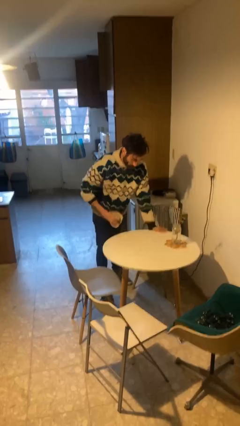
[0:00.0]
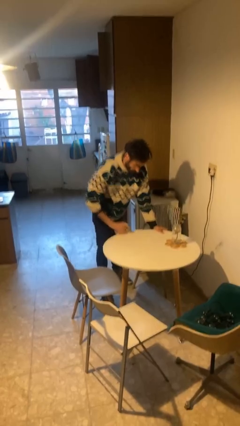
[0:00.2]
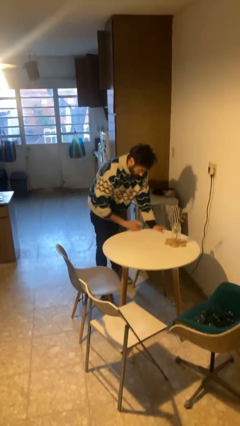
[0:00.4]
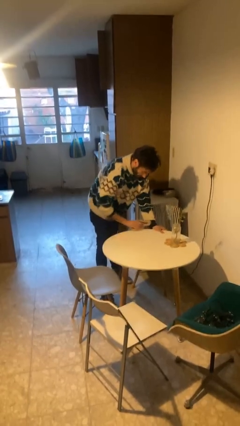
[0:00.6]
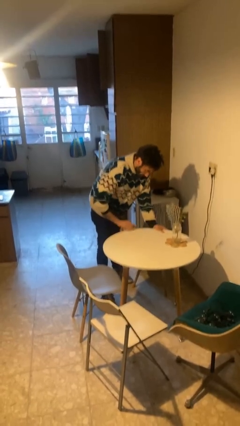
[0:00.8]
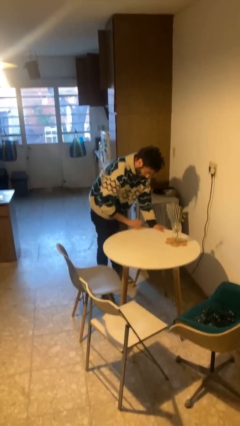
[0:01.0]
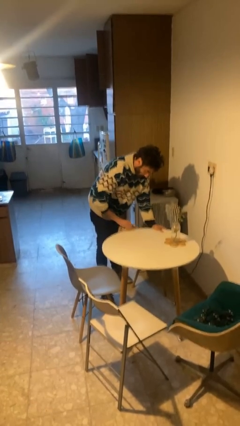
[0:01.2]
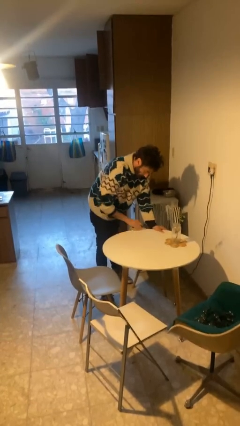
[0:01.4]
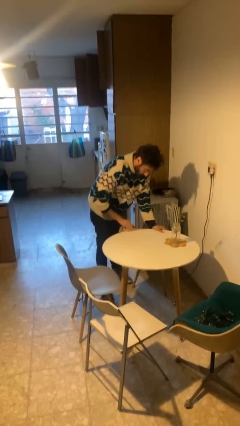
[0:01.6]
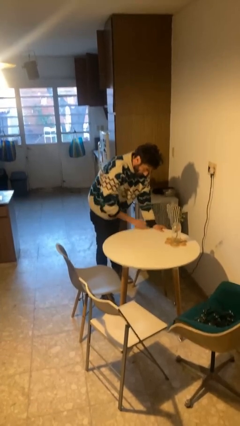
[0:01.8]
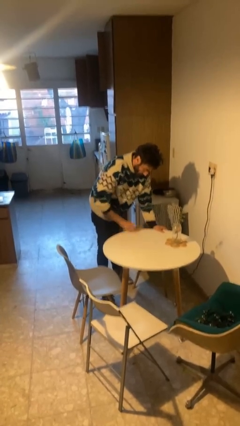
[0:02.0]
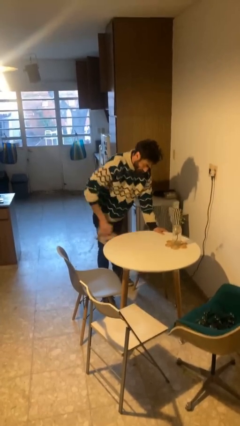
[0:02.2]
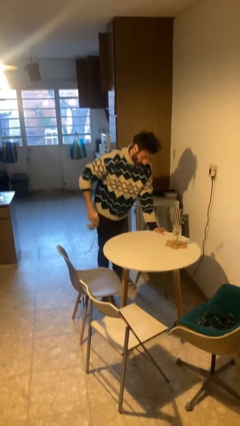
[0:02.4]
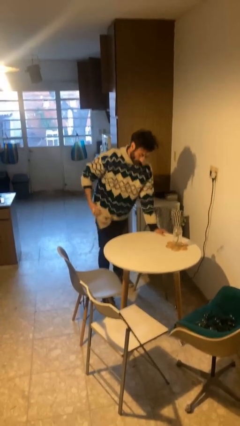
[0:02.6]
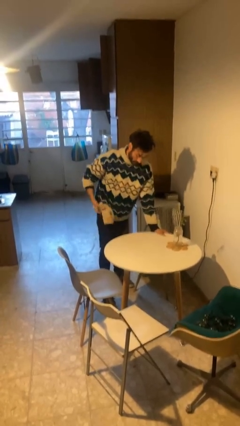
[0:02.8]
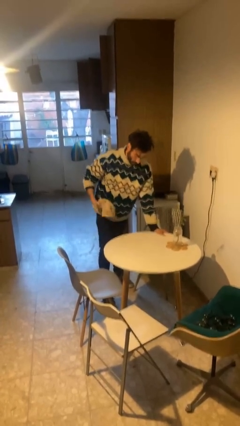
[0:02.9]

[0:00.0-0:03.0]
person cleans table with rag

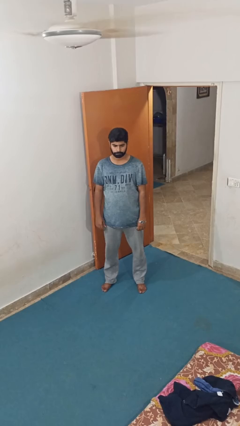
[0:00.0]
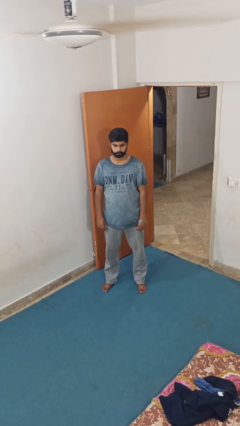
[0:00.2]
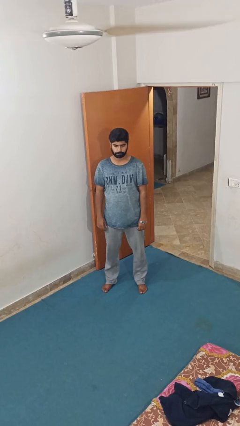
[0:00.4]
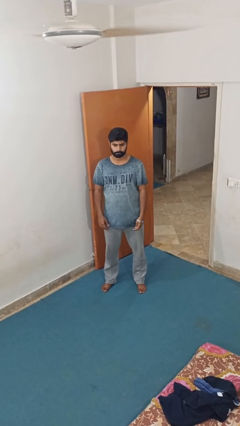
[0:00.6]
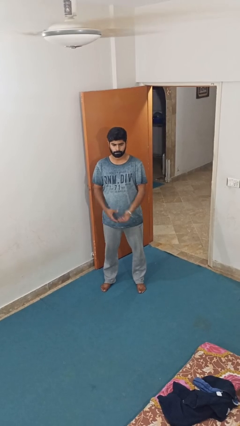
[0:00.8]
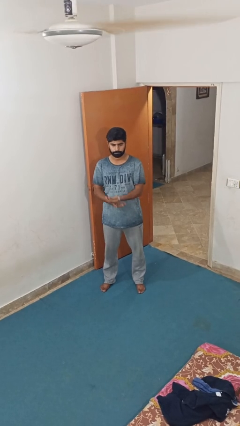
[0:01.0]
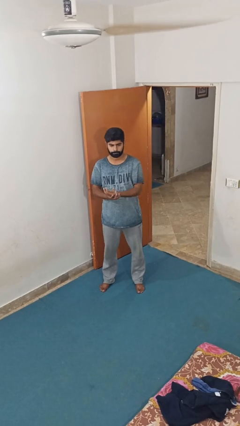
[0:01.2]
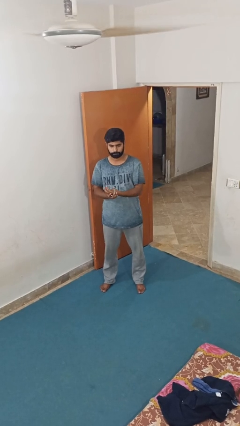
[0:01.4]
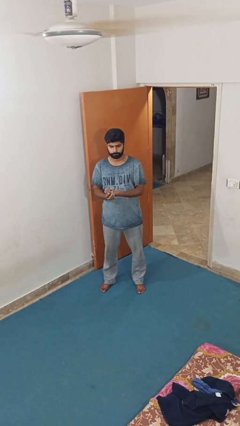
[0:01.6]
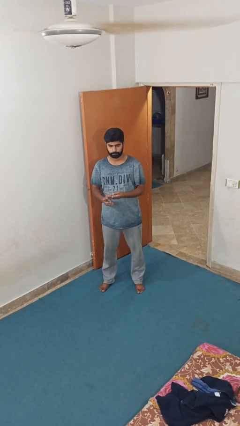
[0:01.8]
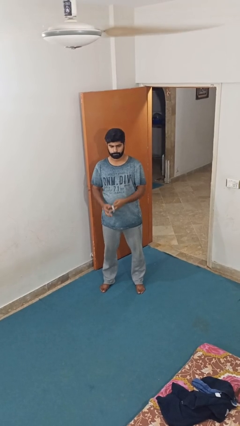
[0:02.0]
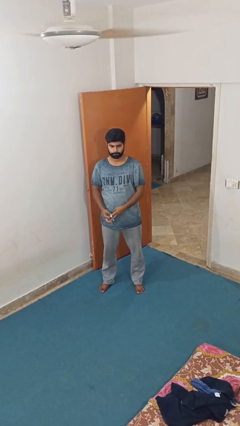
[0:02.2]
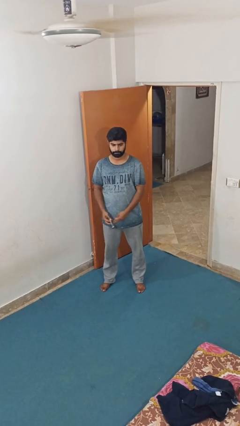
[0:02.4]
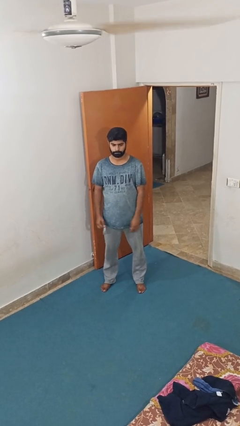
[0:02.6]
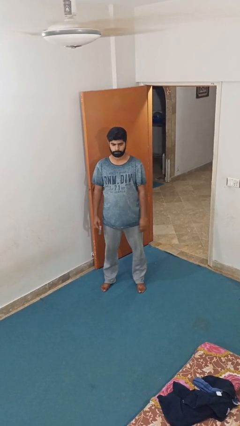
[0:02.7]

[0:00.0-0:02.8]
person takes off wristwatch

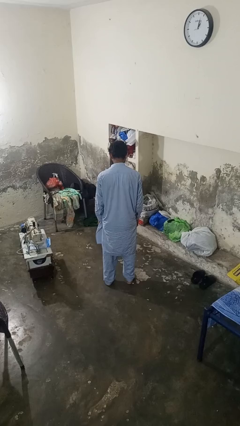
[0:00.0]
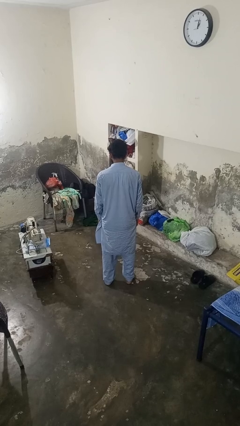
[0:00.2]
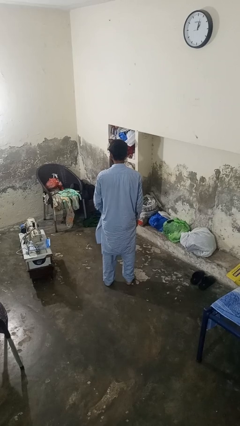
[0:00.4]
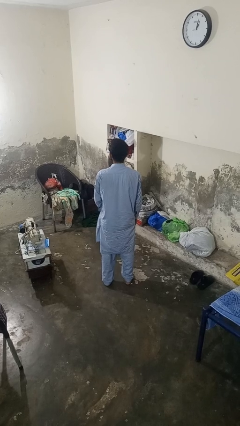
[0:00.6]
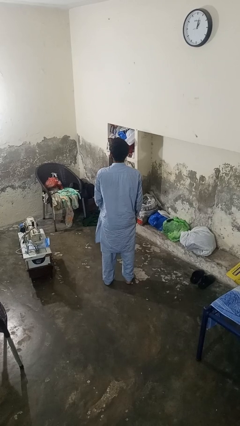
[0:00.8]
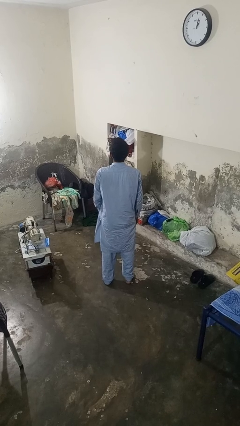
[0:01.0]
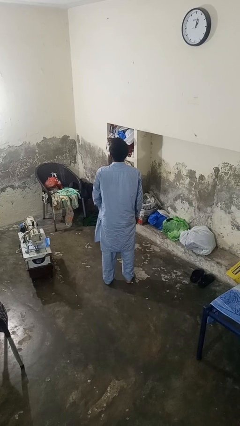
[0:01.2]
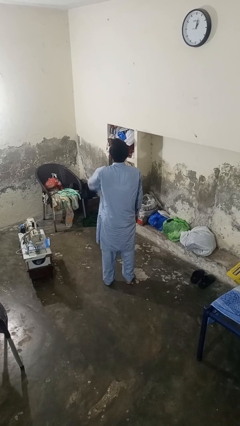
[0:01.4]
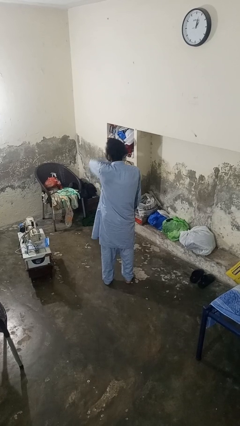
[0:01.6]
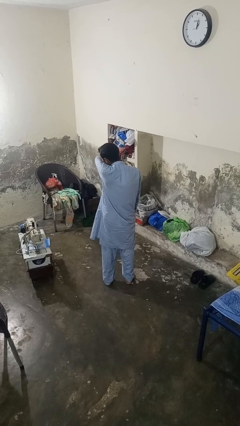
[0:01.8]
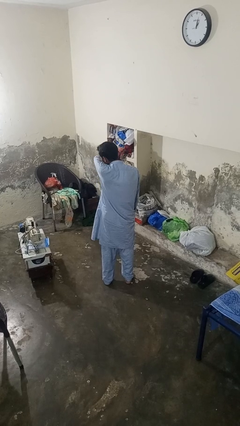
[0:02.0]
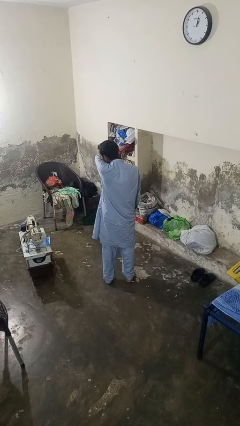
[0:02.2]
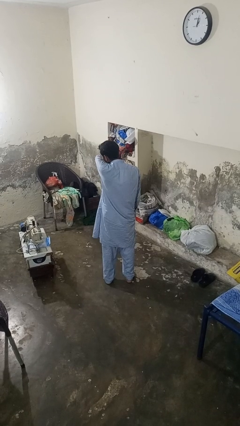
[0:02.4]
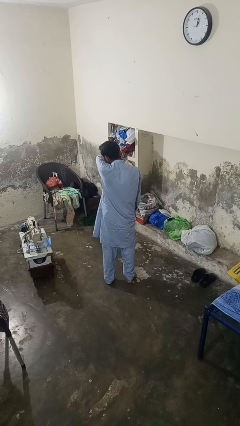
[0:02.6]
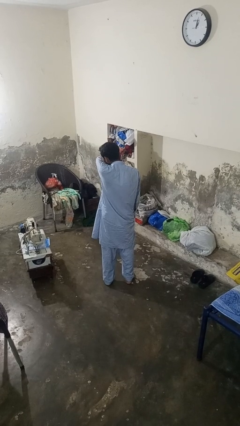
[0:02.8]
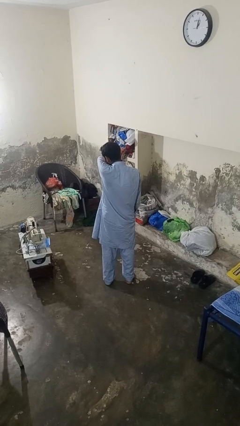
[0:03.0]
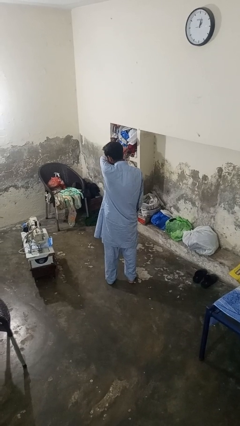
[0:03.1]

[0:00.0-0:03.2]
person sneezes into arm

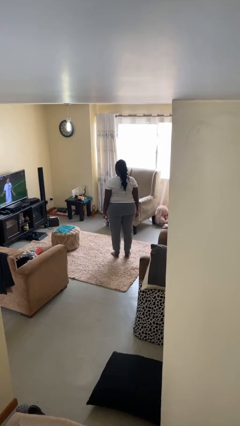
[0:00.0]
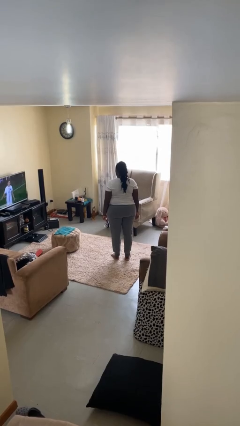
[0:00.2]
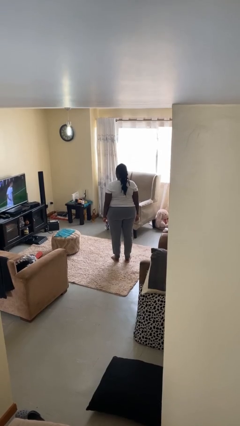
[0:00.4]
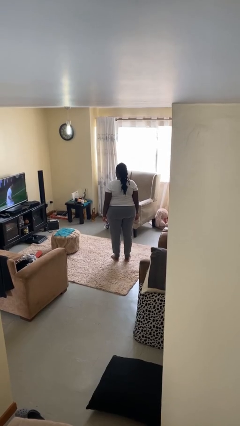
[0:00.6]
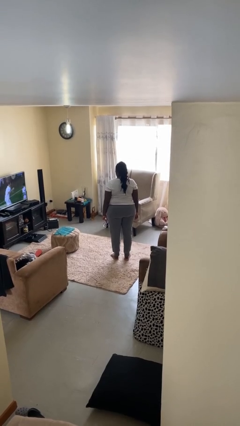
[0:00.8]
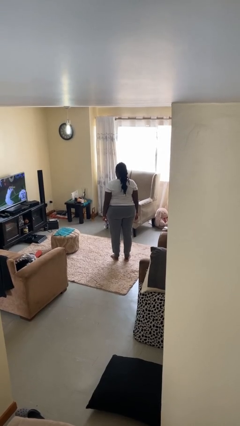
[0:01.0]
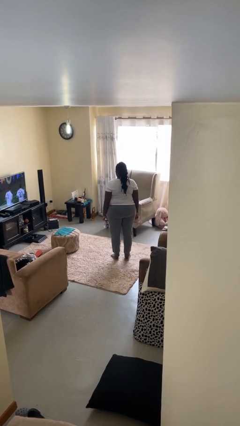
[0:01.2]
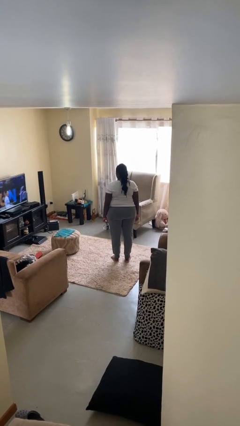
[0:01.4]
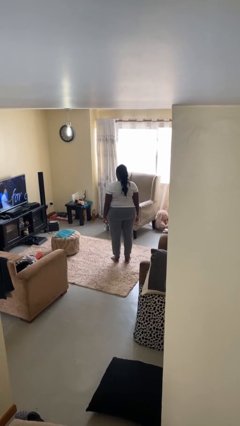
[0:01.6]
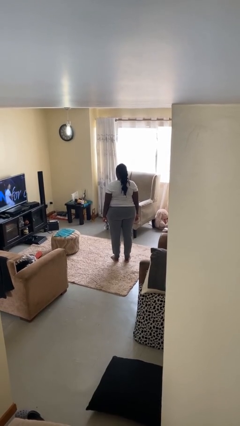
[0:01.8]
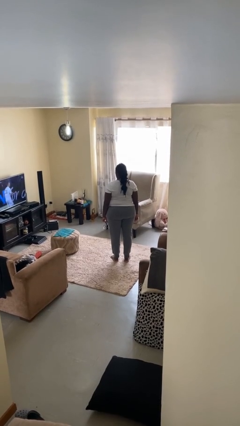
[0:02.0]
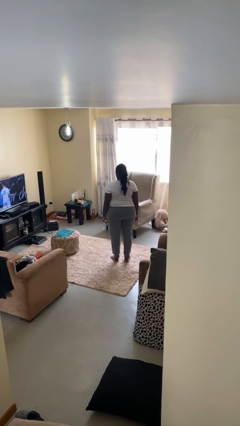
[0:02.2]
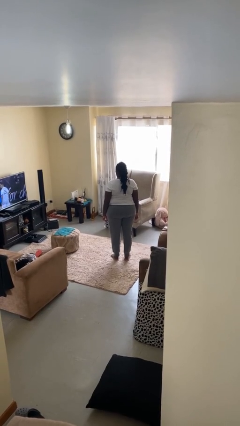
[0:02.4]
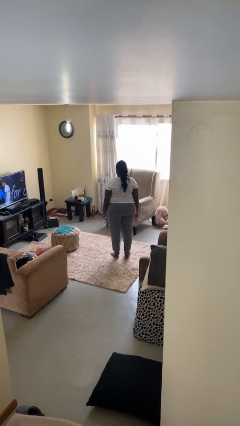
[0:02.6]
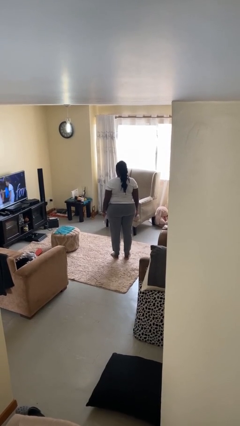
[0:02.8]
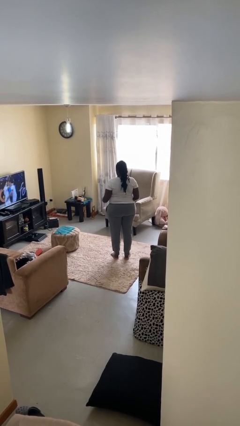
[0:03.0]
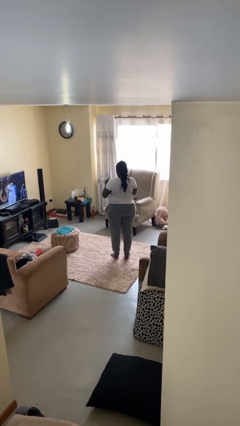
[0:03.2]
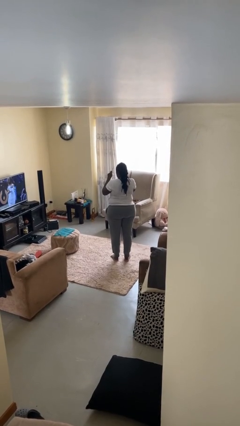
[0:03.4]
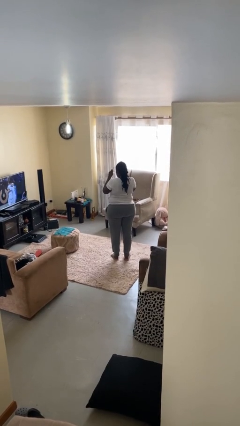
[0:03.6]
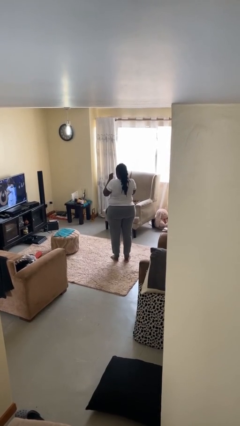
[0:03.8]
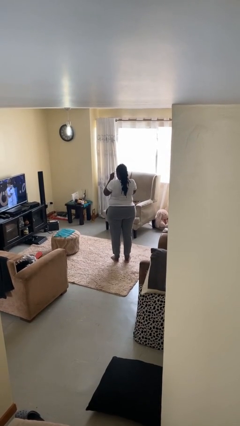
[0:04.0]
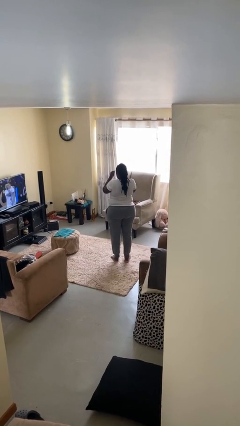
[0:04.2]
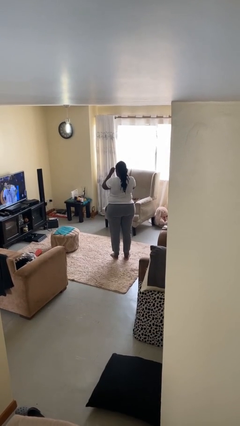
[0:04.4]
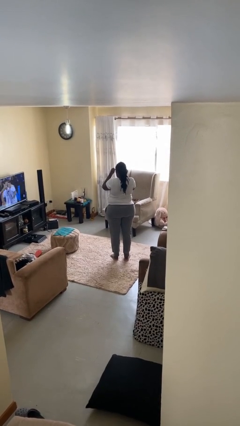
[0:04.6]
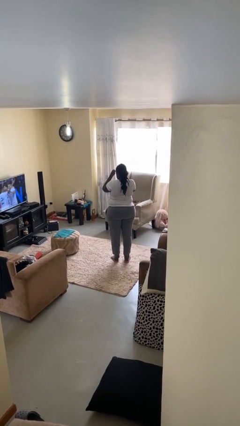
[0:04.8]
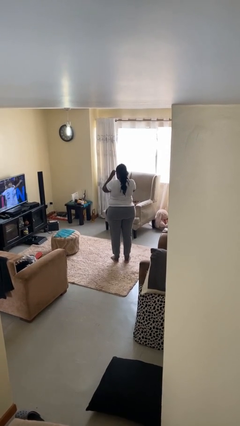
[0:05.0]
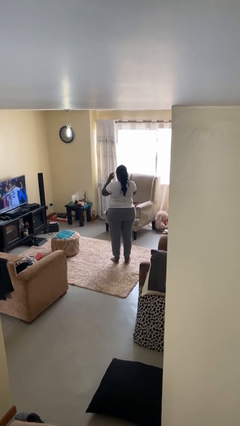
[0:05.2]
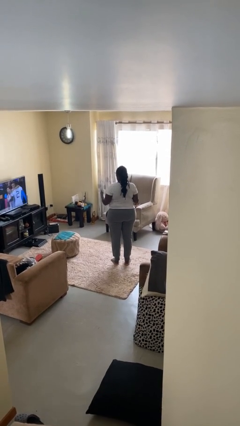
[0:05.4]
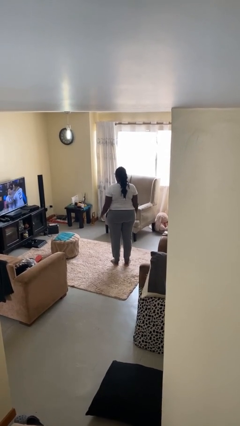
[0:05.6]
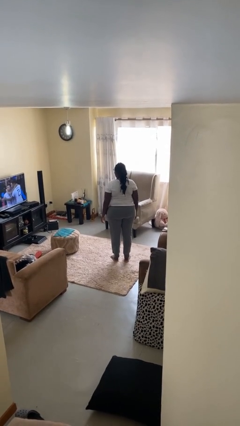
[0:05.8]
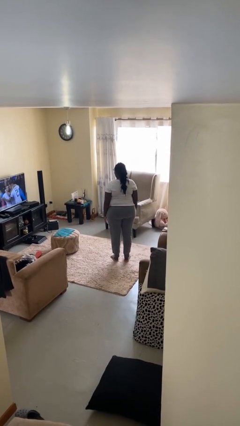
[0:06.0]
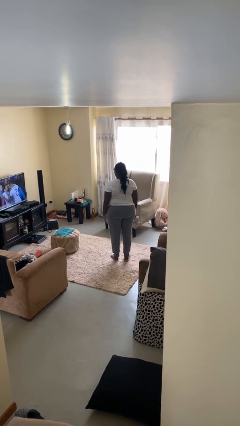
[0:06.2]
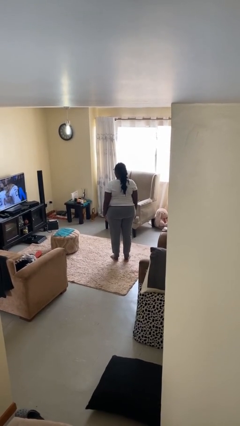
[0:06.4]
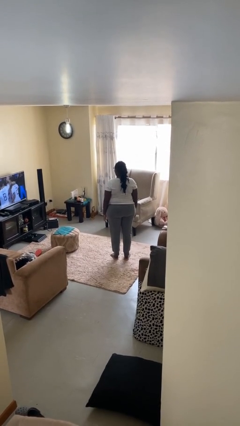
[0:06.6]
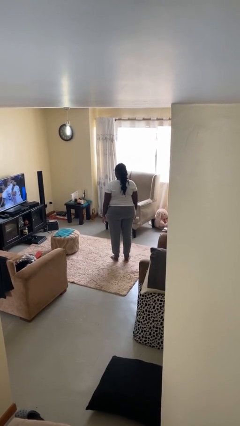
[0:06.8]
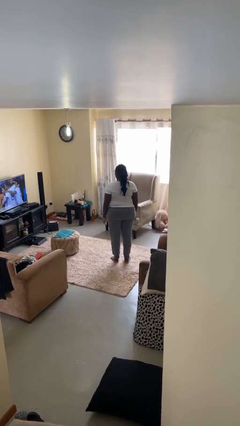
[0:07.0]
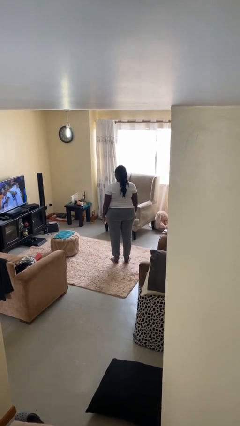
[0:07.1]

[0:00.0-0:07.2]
person puts on glasses

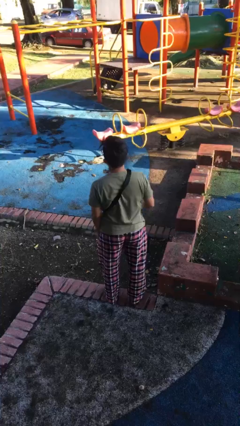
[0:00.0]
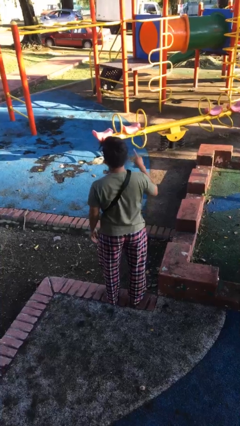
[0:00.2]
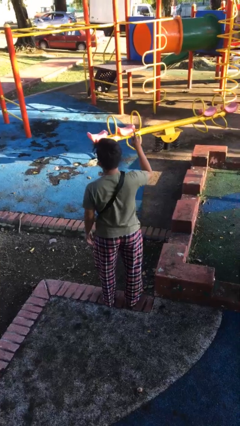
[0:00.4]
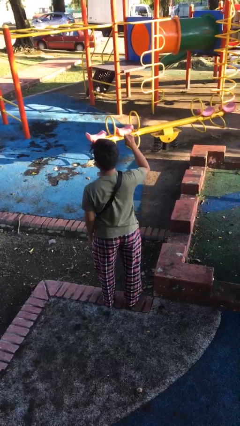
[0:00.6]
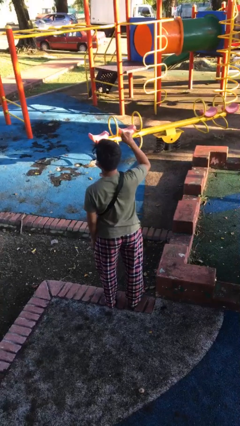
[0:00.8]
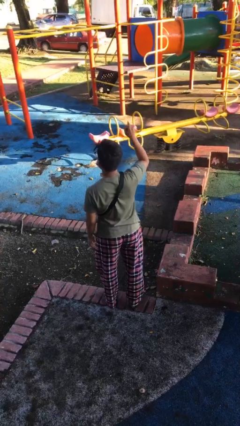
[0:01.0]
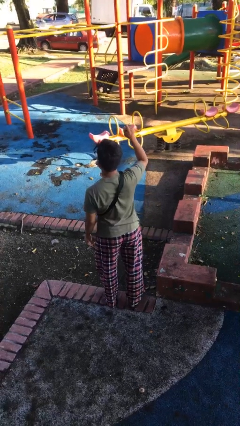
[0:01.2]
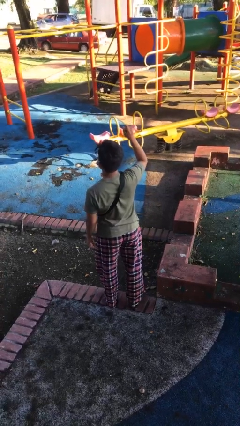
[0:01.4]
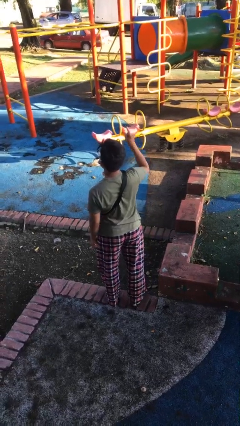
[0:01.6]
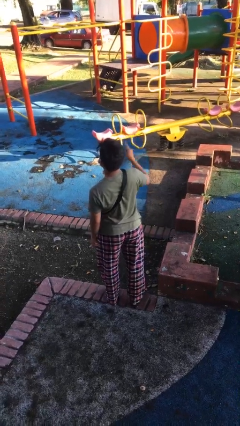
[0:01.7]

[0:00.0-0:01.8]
person gestures number one

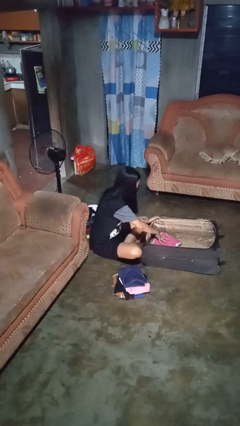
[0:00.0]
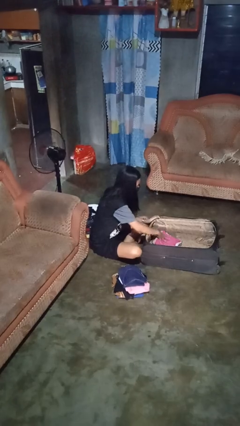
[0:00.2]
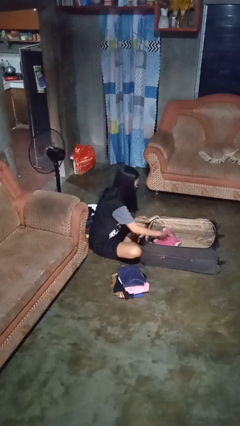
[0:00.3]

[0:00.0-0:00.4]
person unloads clothes from suitcase
